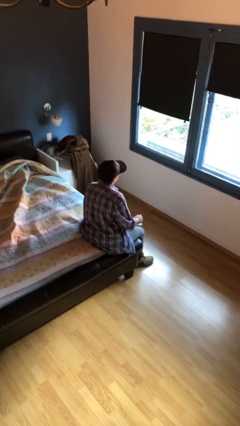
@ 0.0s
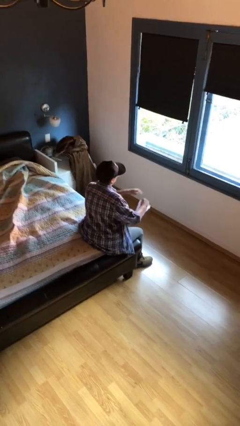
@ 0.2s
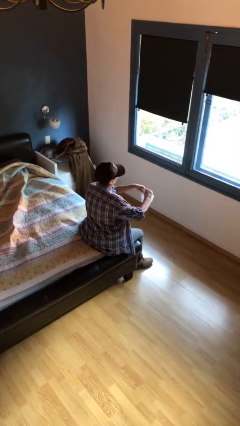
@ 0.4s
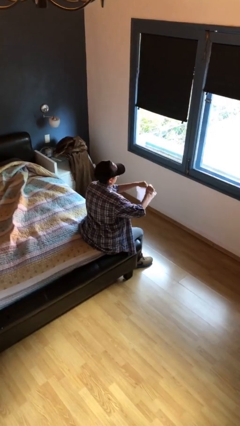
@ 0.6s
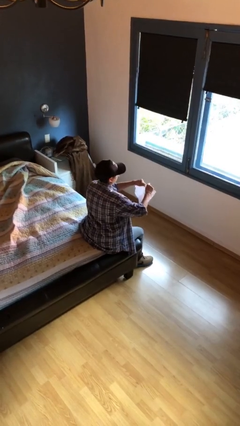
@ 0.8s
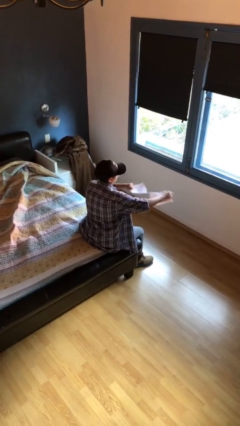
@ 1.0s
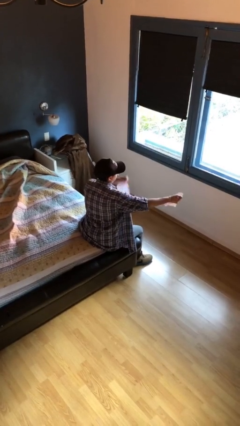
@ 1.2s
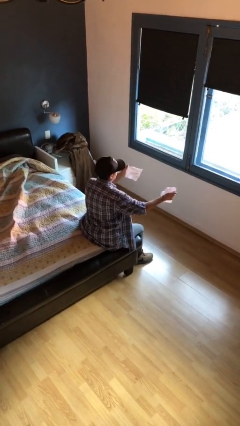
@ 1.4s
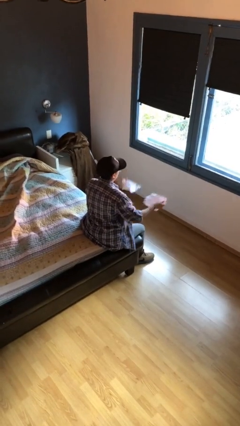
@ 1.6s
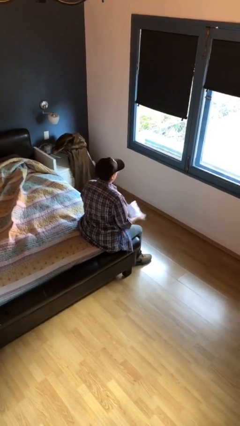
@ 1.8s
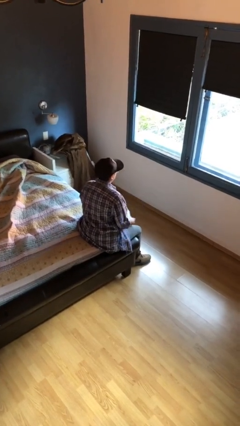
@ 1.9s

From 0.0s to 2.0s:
person tears paper

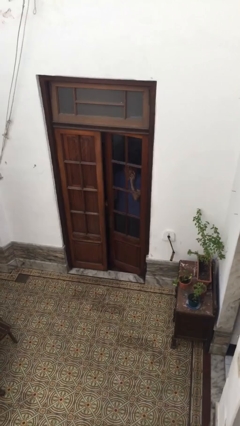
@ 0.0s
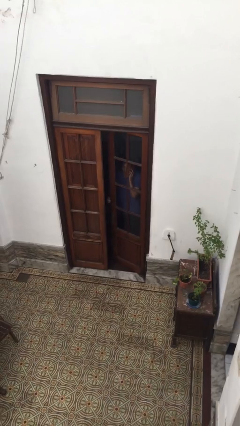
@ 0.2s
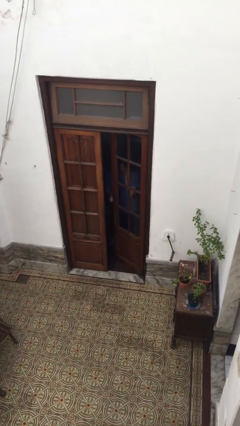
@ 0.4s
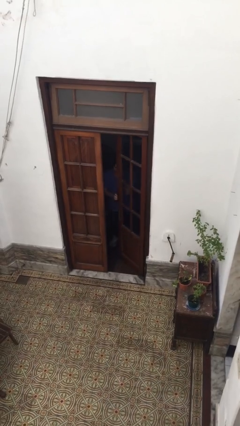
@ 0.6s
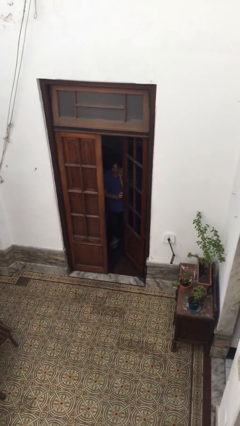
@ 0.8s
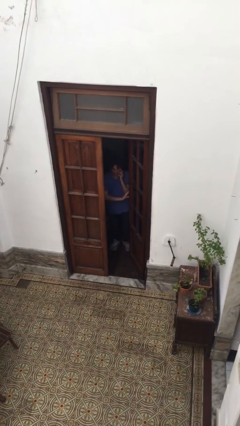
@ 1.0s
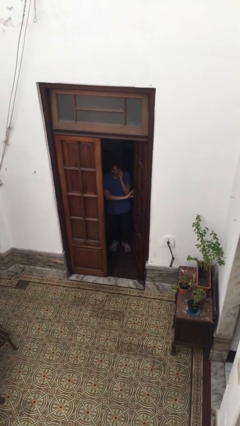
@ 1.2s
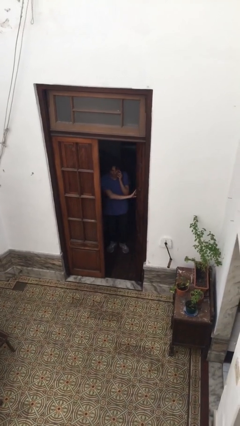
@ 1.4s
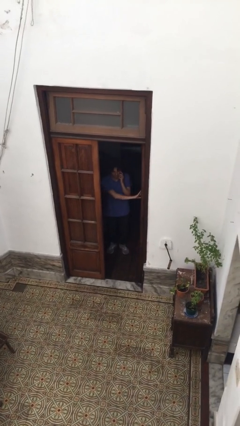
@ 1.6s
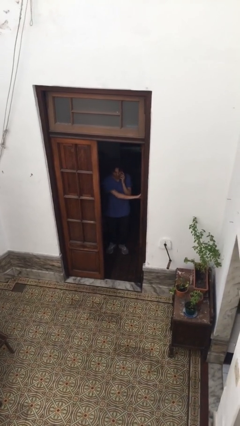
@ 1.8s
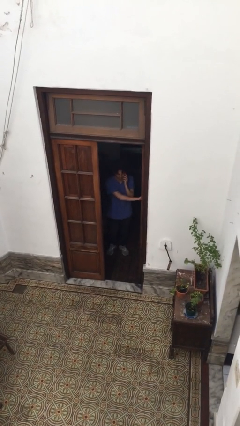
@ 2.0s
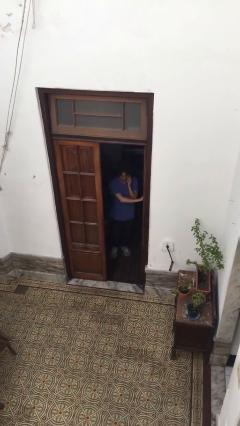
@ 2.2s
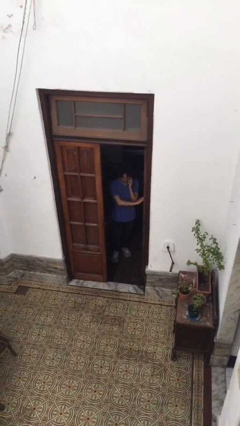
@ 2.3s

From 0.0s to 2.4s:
person opens facility door

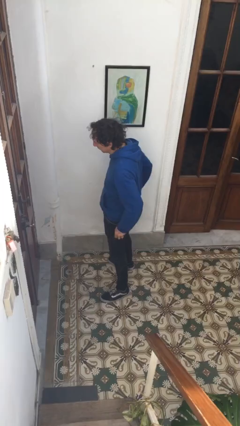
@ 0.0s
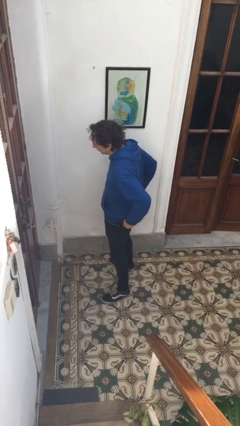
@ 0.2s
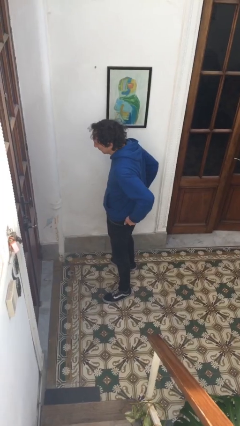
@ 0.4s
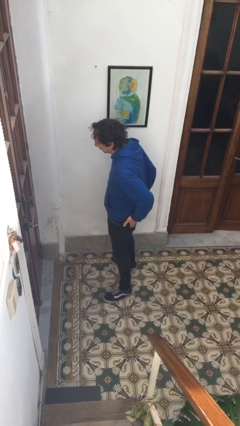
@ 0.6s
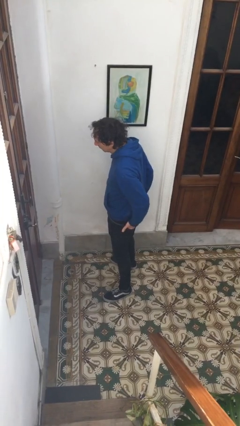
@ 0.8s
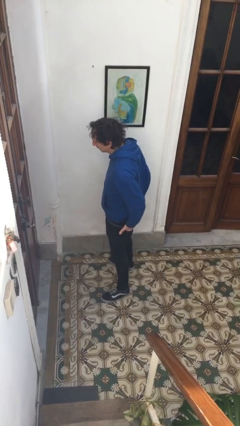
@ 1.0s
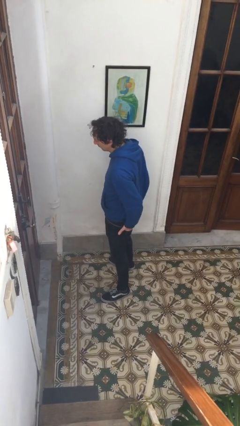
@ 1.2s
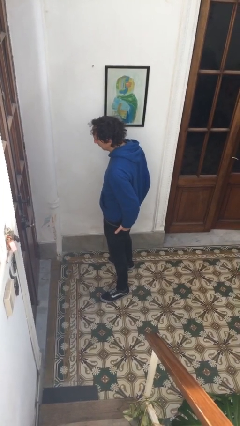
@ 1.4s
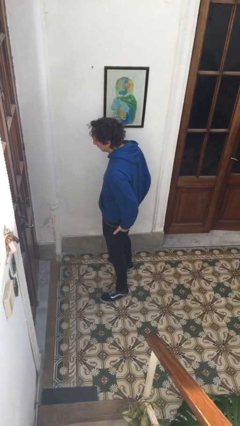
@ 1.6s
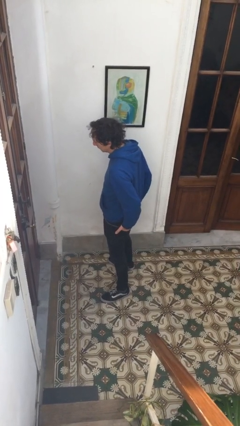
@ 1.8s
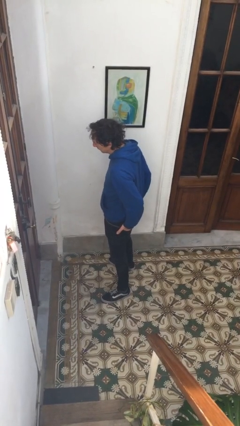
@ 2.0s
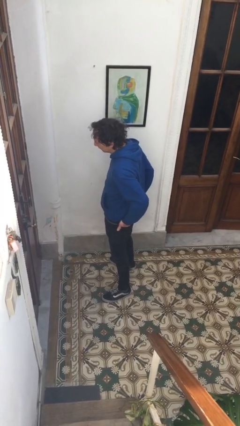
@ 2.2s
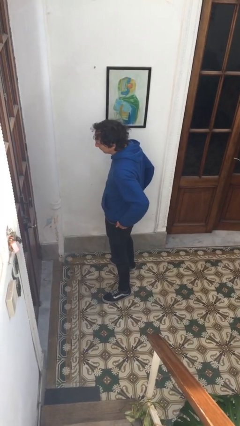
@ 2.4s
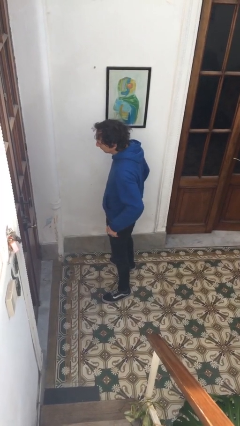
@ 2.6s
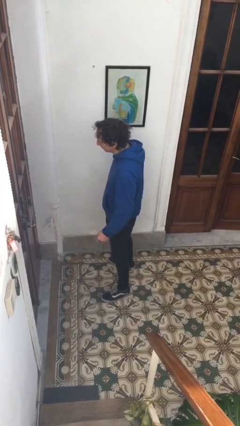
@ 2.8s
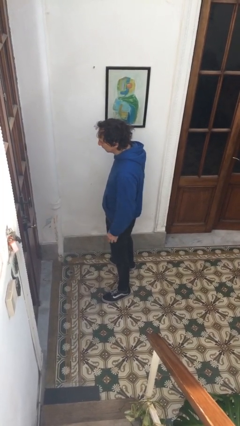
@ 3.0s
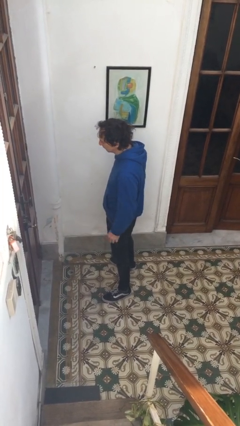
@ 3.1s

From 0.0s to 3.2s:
person puts hands in back pockets

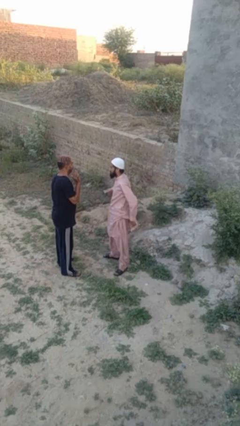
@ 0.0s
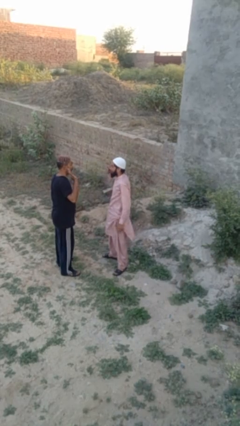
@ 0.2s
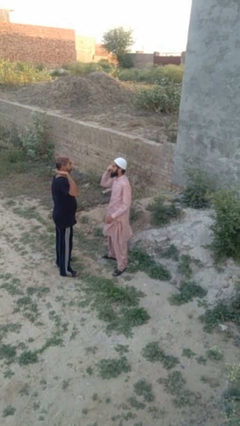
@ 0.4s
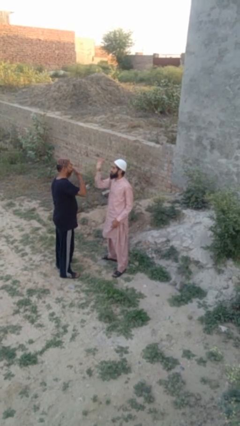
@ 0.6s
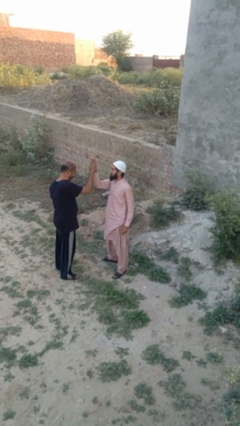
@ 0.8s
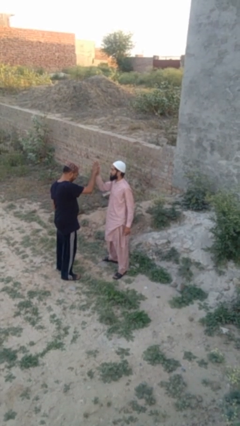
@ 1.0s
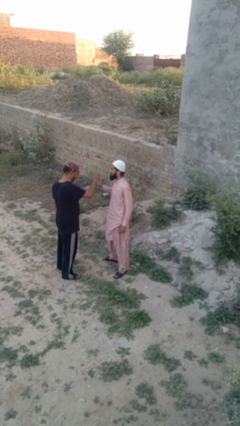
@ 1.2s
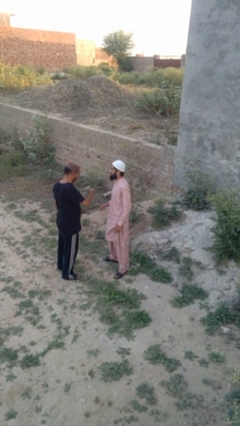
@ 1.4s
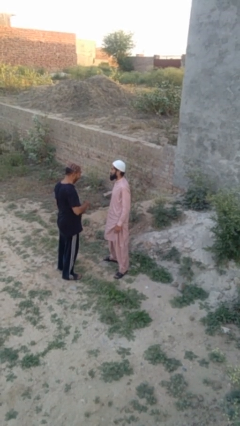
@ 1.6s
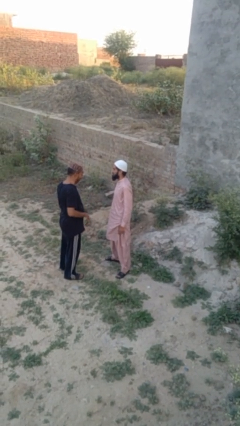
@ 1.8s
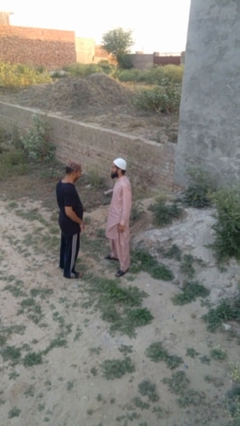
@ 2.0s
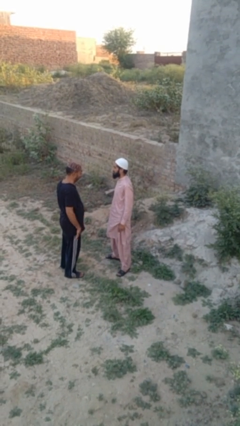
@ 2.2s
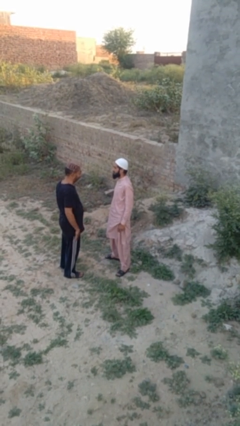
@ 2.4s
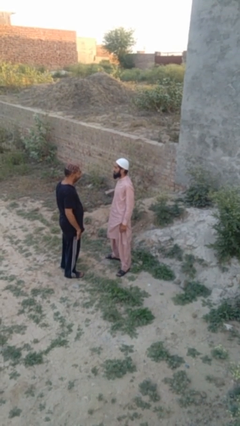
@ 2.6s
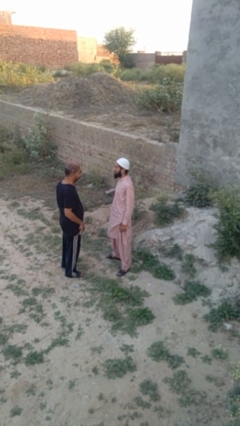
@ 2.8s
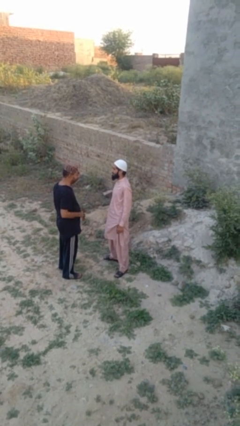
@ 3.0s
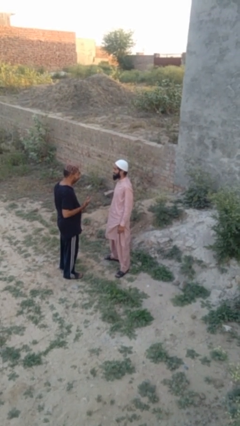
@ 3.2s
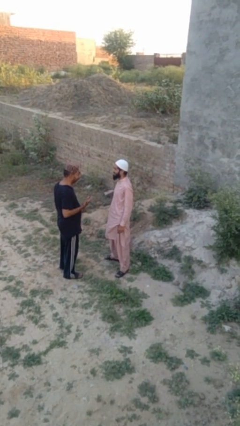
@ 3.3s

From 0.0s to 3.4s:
person highfives hand

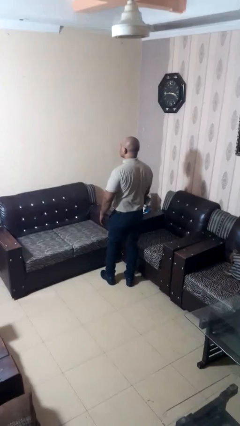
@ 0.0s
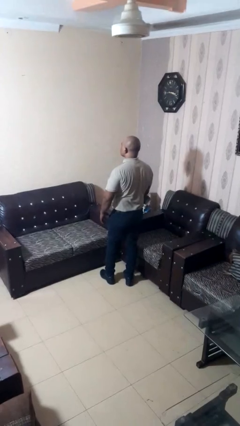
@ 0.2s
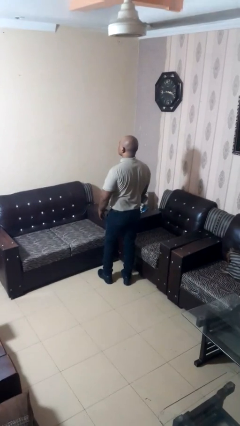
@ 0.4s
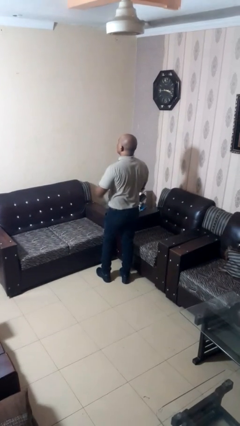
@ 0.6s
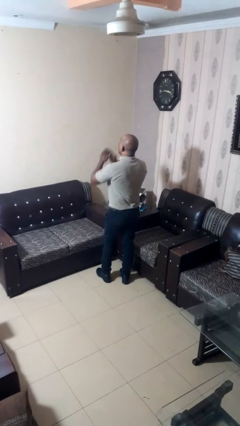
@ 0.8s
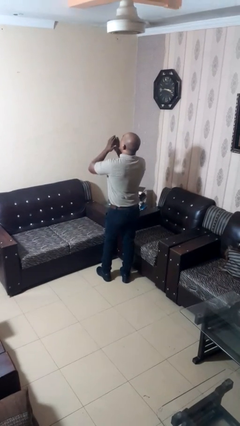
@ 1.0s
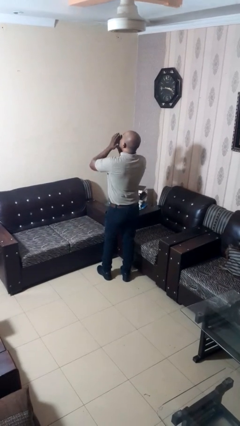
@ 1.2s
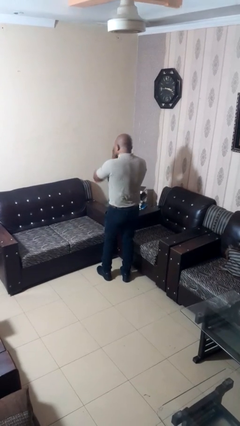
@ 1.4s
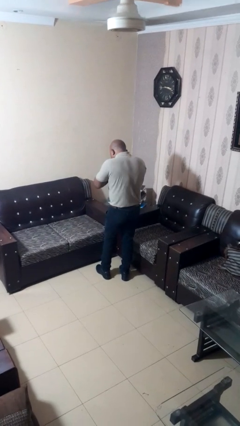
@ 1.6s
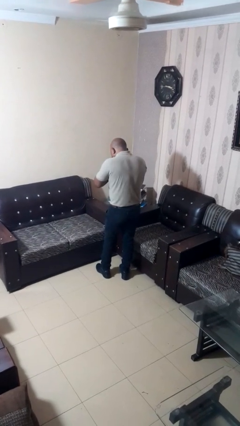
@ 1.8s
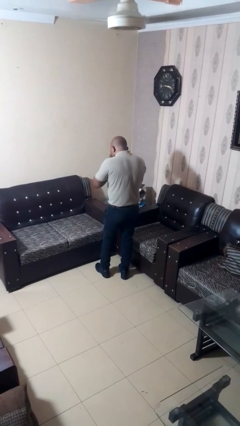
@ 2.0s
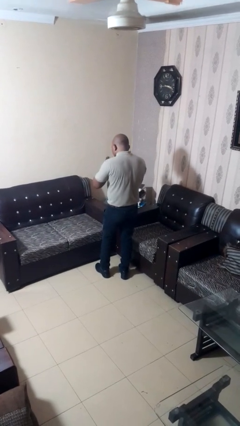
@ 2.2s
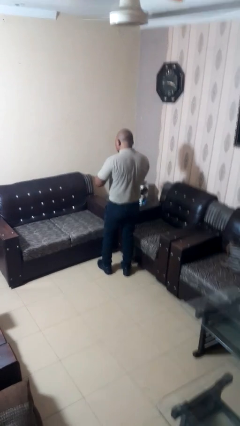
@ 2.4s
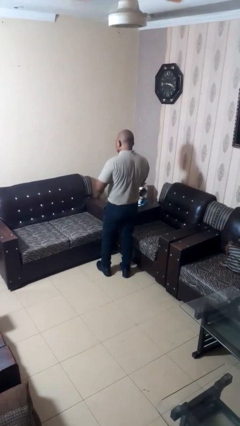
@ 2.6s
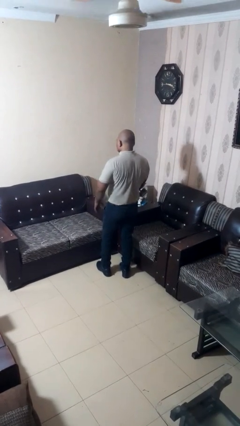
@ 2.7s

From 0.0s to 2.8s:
person sneezes into hand

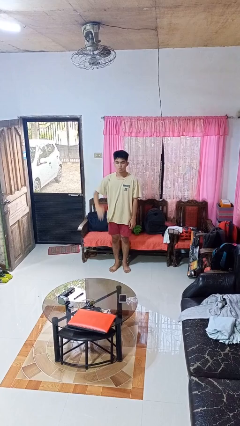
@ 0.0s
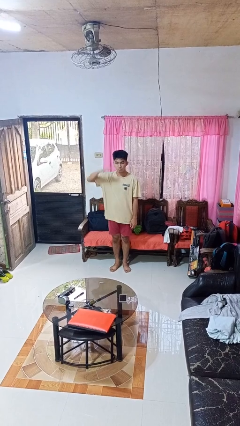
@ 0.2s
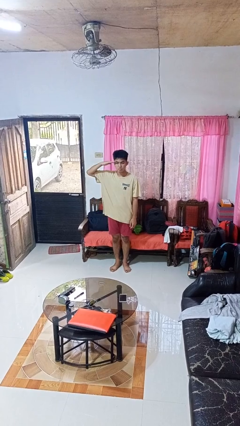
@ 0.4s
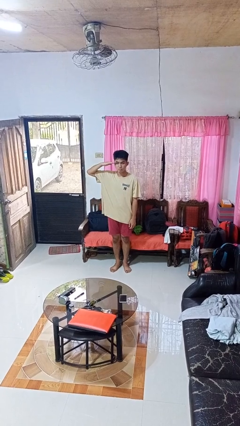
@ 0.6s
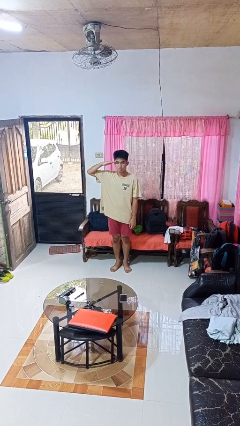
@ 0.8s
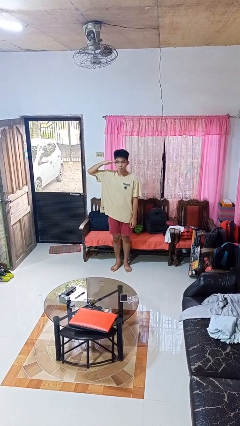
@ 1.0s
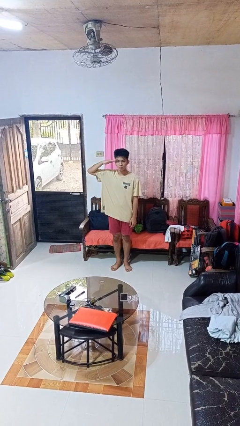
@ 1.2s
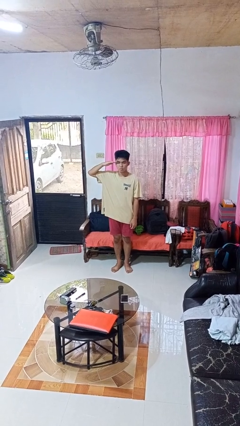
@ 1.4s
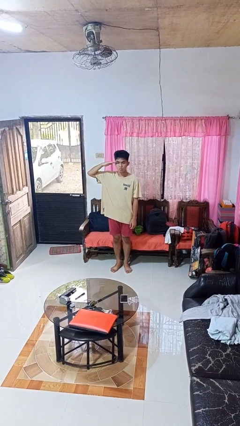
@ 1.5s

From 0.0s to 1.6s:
person salutes

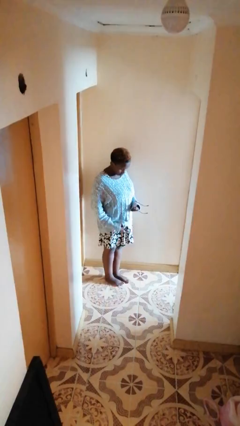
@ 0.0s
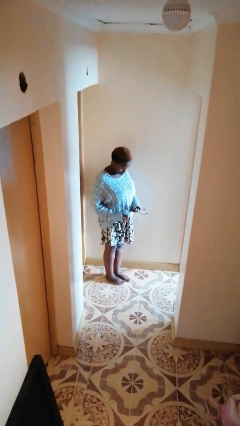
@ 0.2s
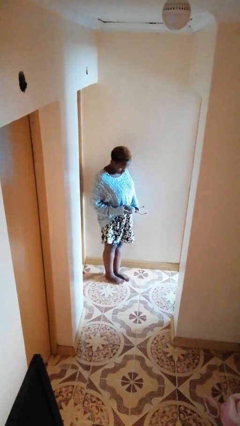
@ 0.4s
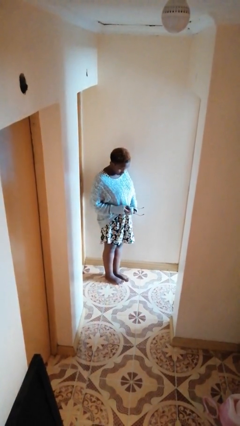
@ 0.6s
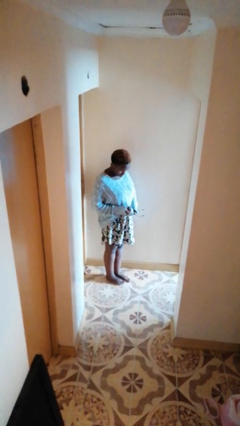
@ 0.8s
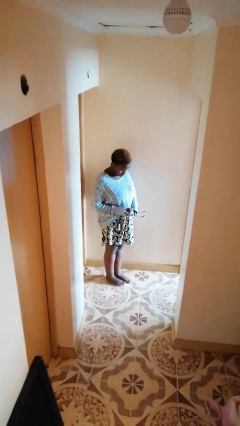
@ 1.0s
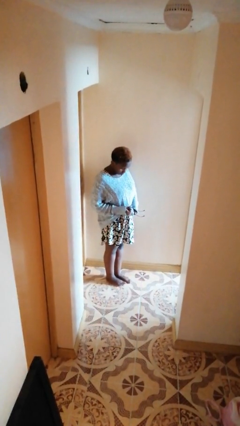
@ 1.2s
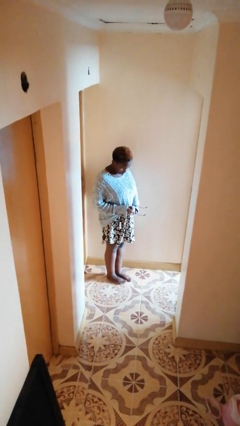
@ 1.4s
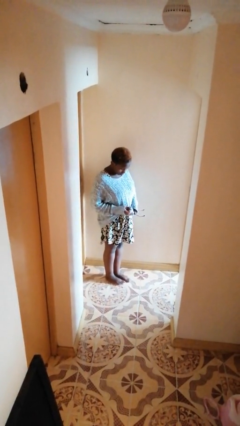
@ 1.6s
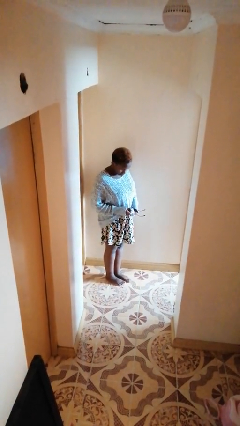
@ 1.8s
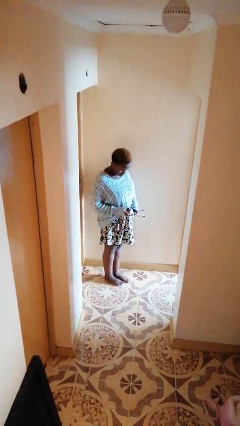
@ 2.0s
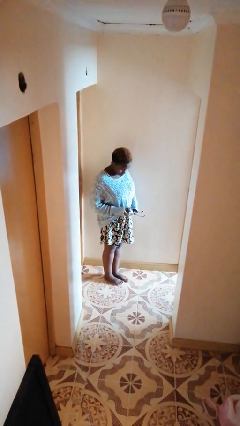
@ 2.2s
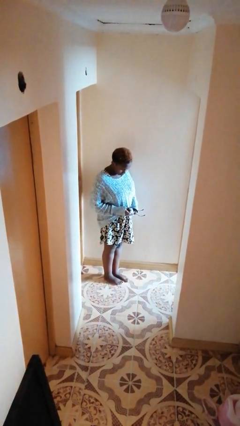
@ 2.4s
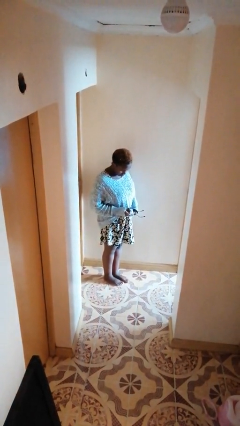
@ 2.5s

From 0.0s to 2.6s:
person cleans eyeglasses
